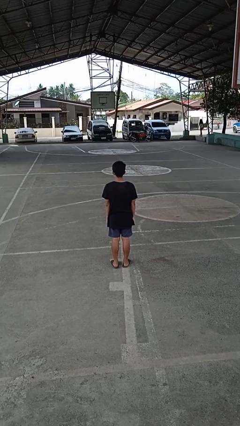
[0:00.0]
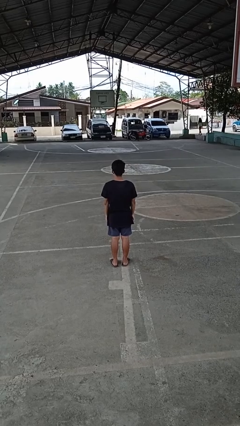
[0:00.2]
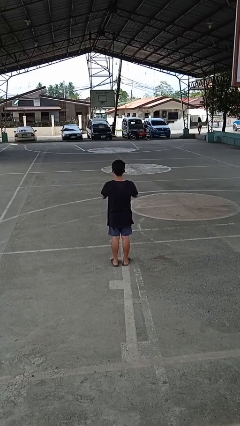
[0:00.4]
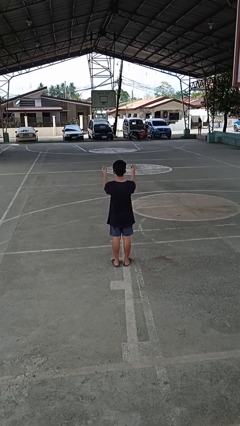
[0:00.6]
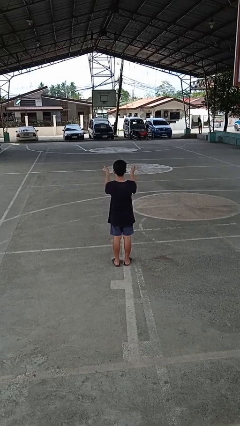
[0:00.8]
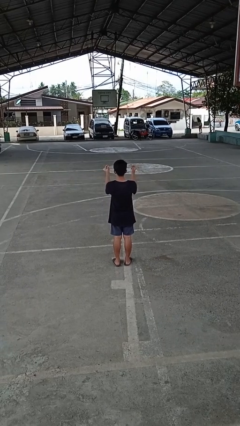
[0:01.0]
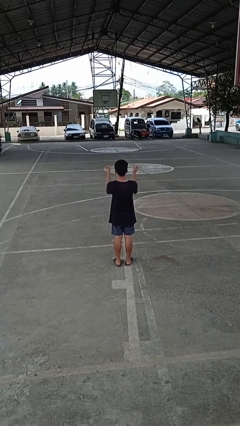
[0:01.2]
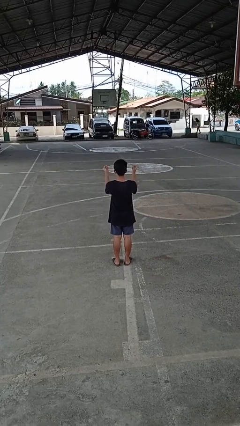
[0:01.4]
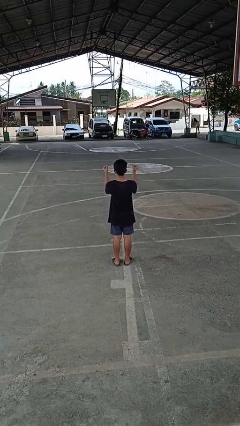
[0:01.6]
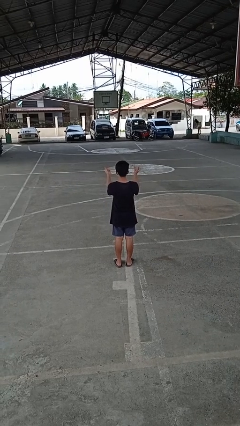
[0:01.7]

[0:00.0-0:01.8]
person snaps fingers

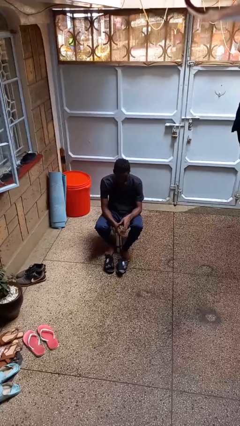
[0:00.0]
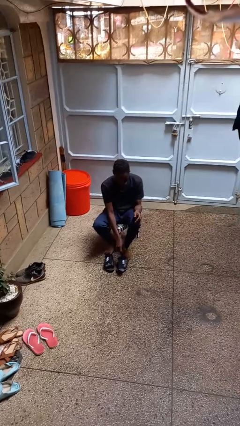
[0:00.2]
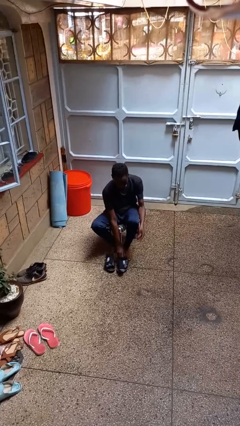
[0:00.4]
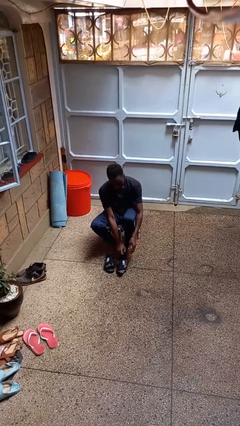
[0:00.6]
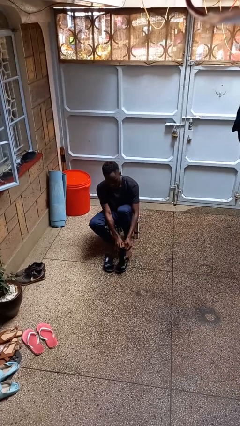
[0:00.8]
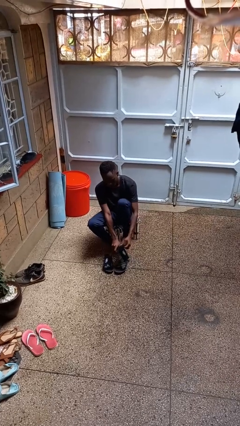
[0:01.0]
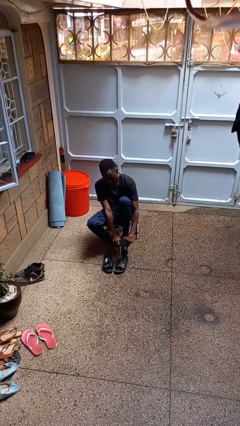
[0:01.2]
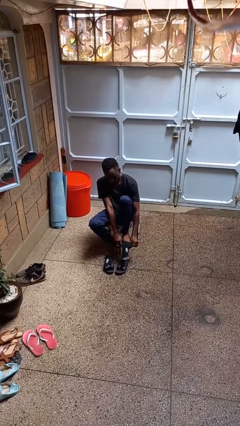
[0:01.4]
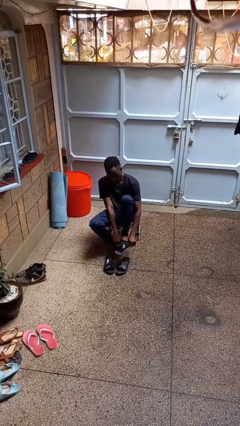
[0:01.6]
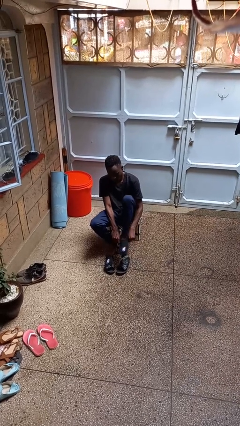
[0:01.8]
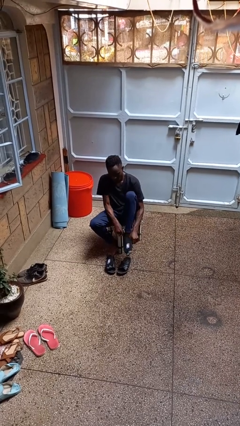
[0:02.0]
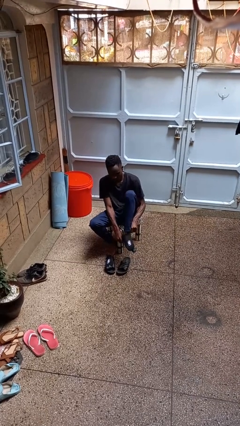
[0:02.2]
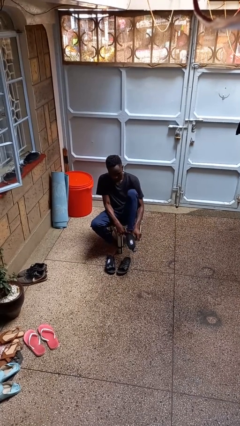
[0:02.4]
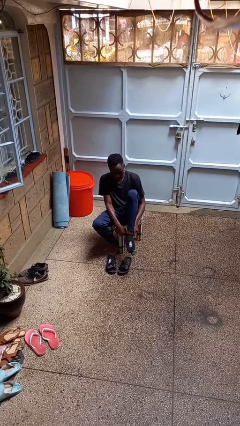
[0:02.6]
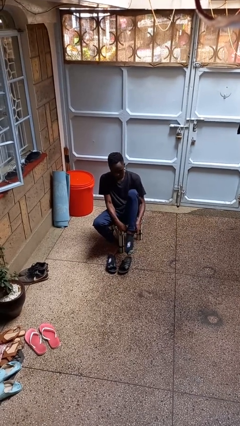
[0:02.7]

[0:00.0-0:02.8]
person puts on socks

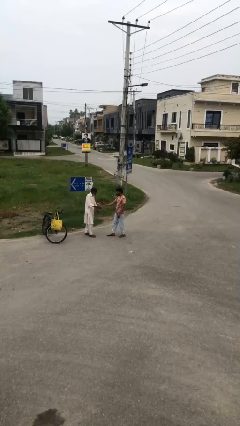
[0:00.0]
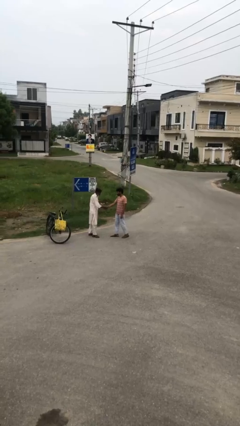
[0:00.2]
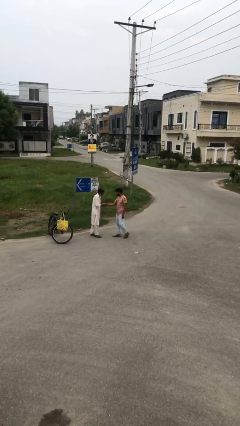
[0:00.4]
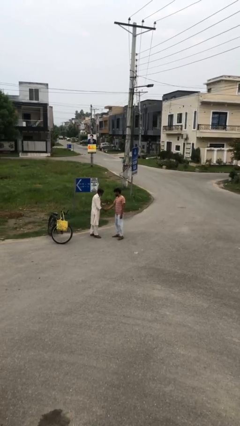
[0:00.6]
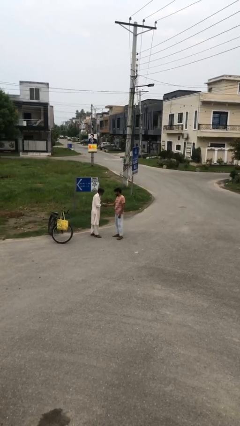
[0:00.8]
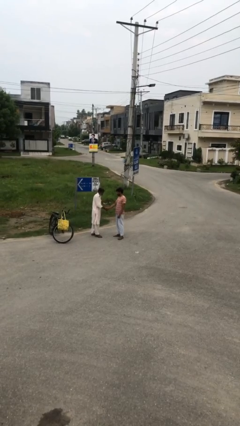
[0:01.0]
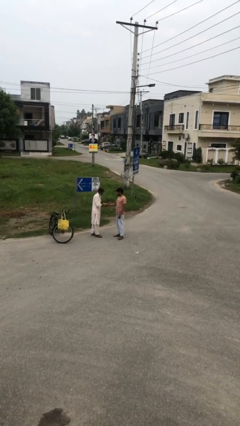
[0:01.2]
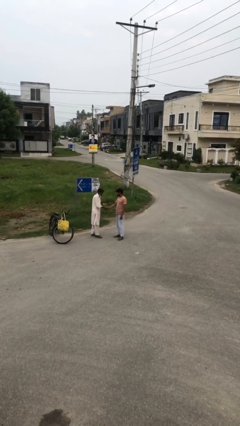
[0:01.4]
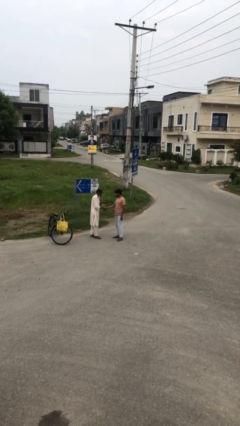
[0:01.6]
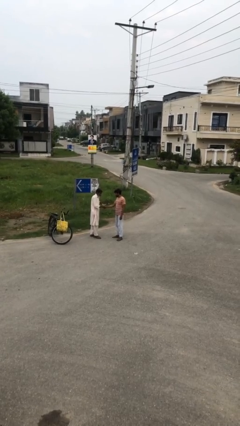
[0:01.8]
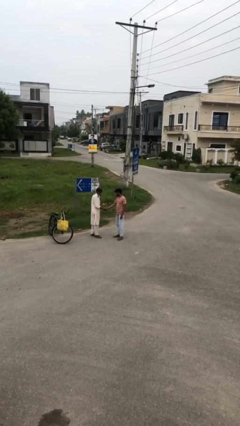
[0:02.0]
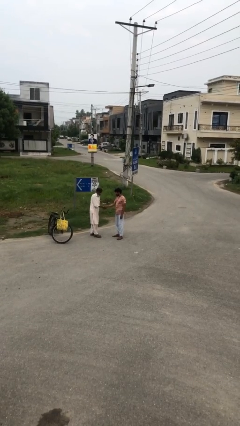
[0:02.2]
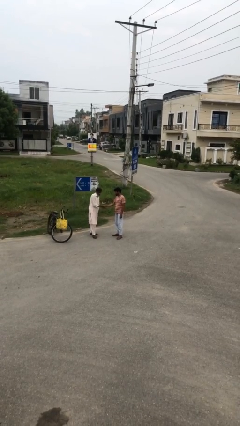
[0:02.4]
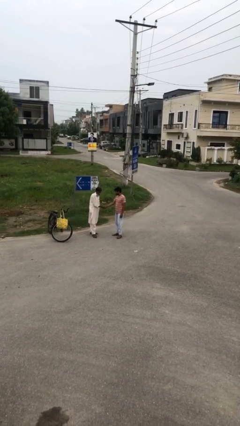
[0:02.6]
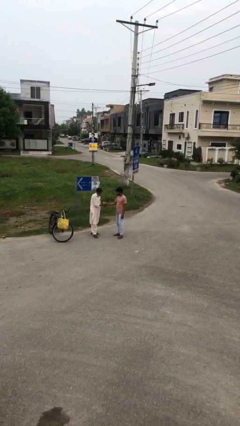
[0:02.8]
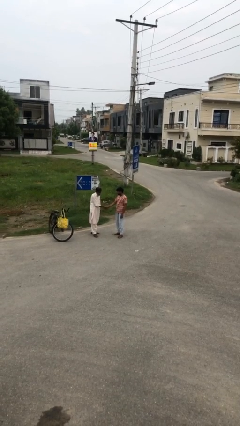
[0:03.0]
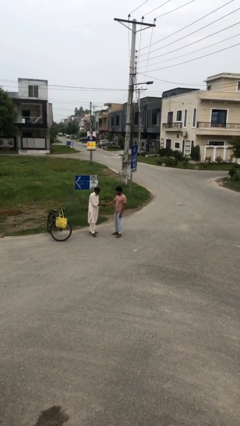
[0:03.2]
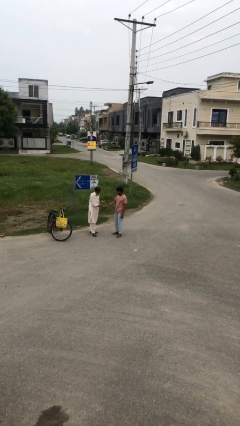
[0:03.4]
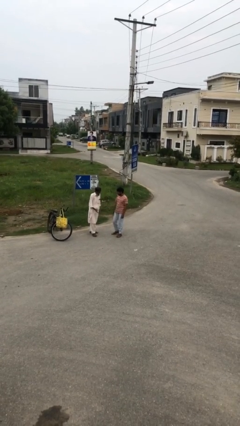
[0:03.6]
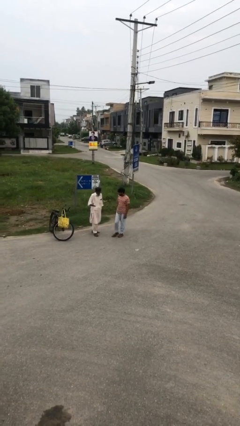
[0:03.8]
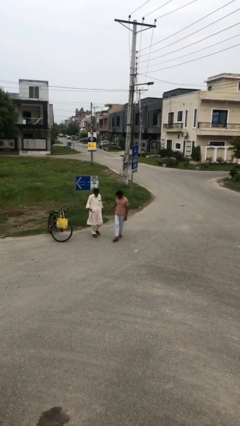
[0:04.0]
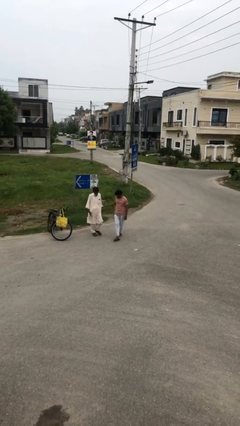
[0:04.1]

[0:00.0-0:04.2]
person shakes hand

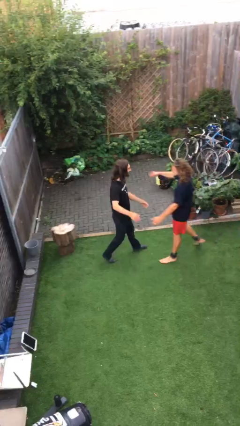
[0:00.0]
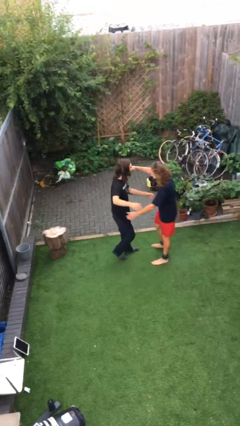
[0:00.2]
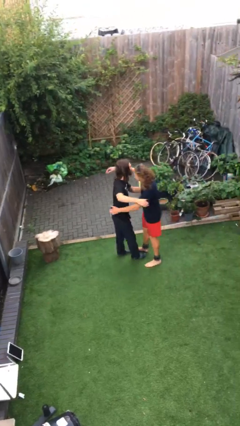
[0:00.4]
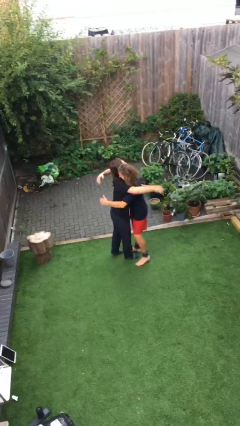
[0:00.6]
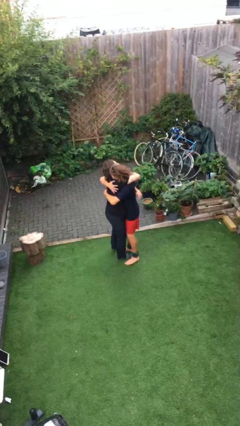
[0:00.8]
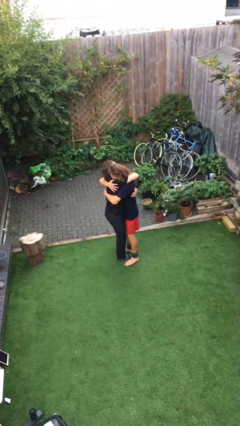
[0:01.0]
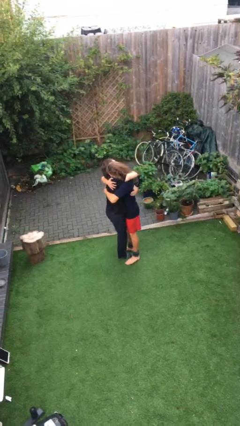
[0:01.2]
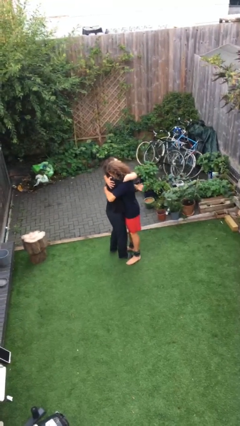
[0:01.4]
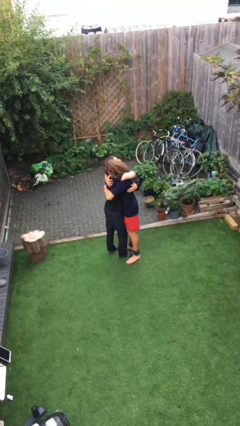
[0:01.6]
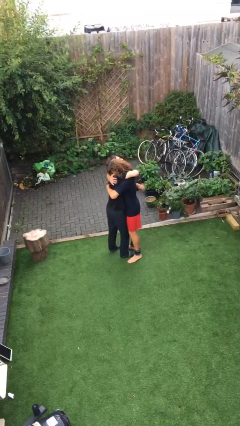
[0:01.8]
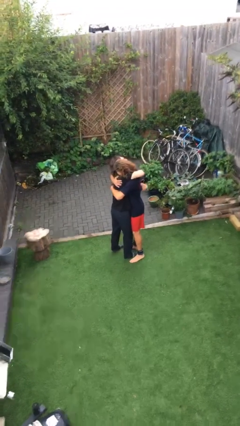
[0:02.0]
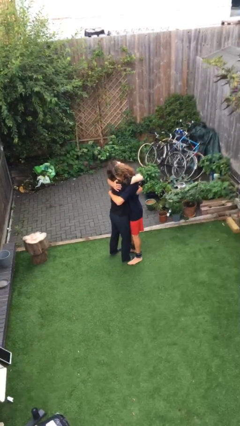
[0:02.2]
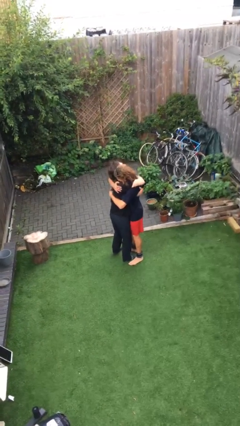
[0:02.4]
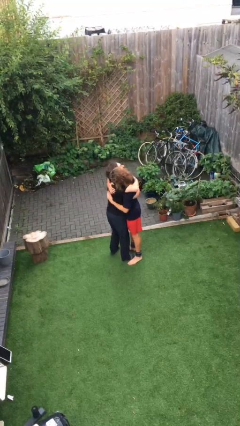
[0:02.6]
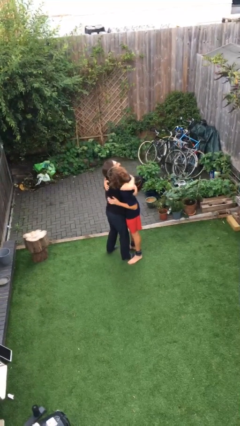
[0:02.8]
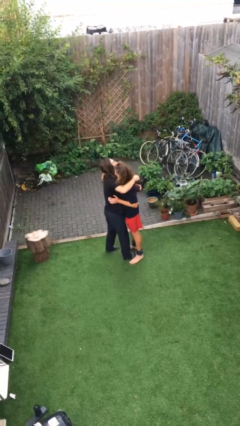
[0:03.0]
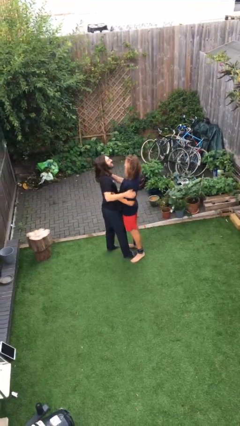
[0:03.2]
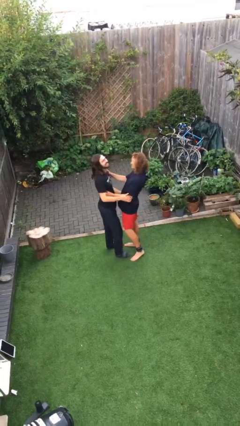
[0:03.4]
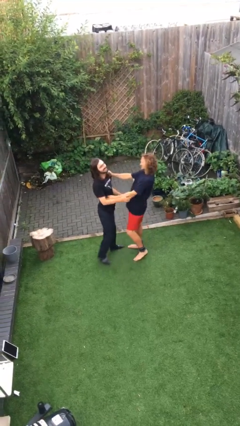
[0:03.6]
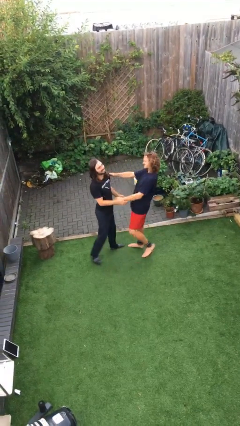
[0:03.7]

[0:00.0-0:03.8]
person embraces person

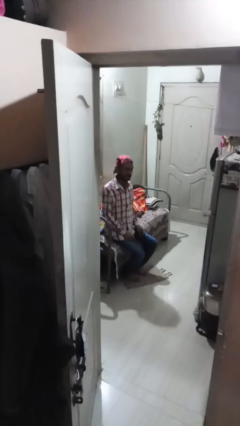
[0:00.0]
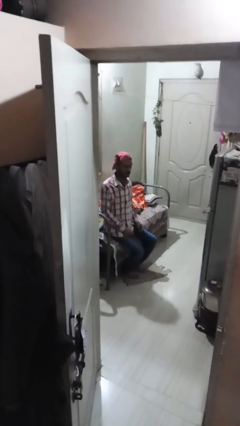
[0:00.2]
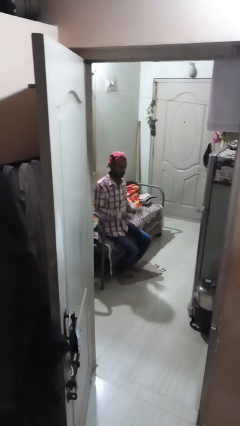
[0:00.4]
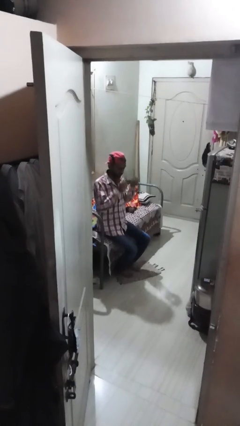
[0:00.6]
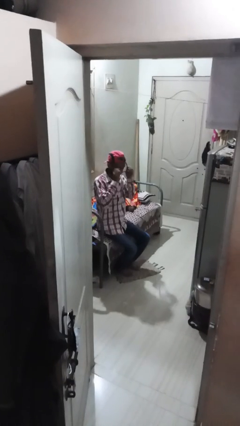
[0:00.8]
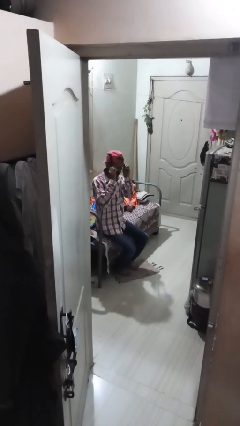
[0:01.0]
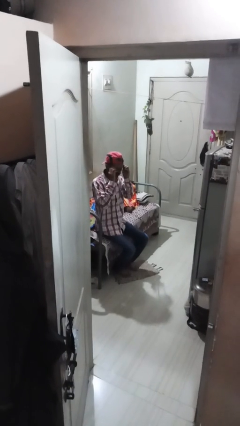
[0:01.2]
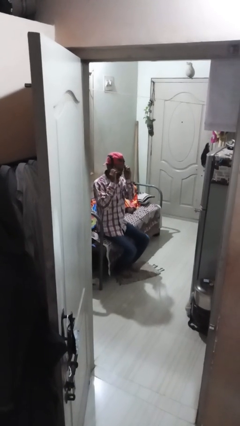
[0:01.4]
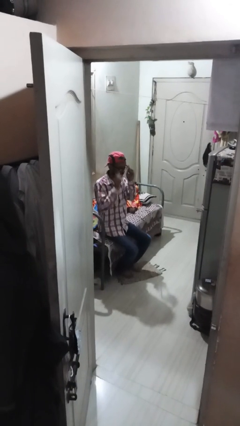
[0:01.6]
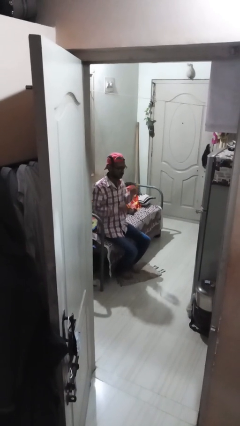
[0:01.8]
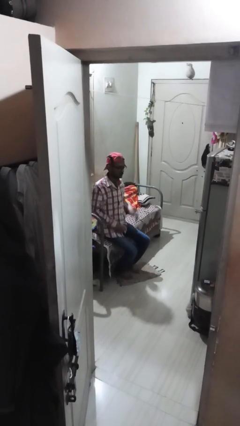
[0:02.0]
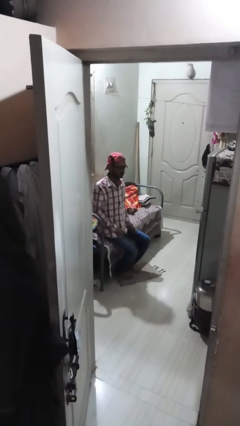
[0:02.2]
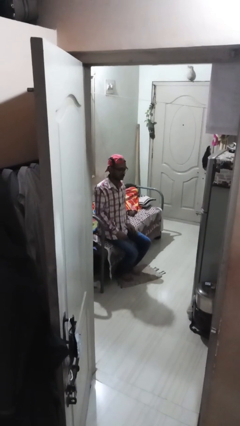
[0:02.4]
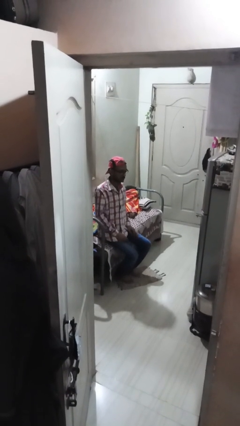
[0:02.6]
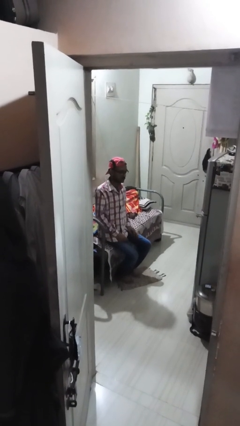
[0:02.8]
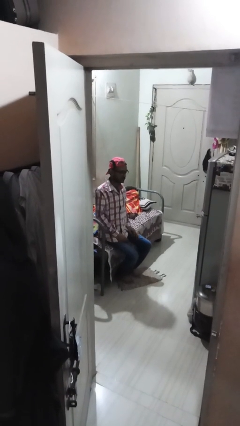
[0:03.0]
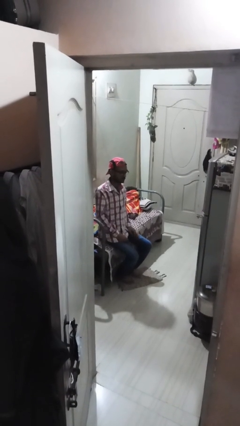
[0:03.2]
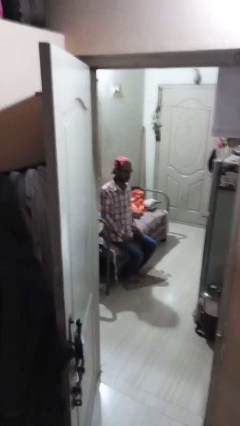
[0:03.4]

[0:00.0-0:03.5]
person puts on glasses

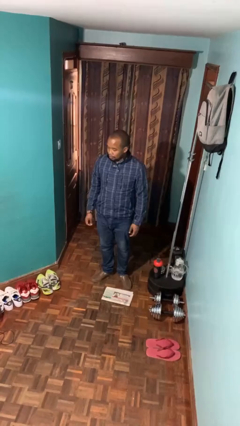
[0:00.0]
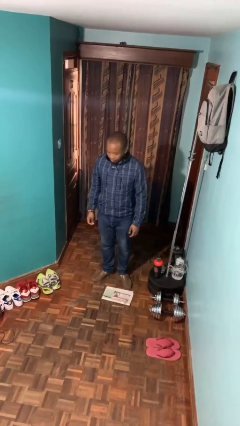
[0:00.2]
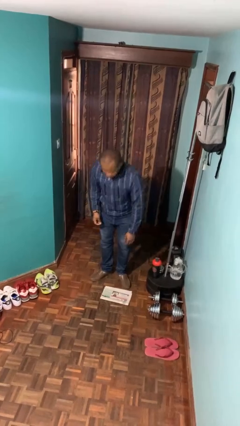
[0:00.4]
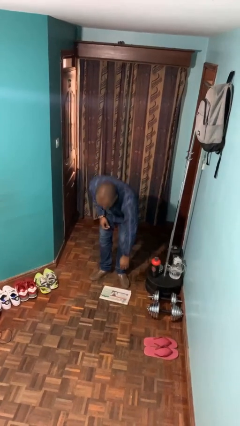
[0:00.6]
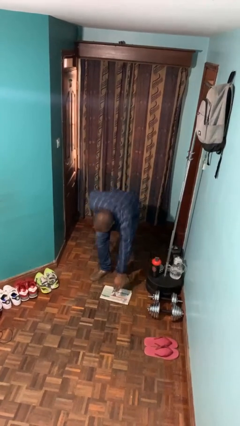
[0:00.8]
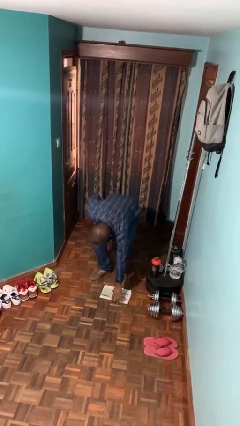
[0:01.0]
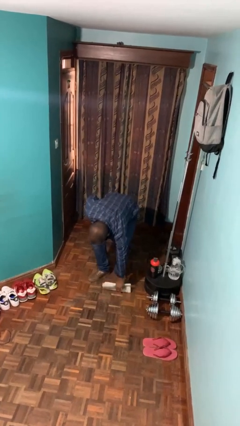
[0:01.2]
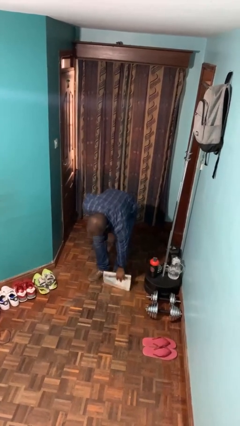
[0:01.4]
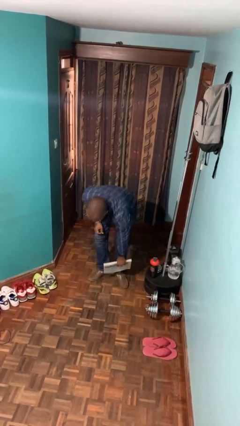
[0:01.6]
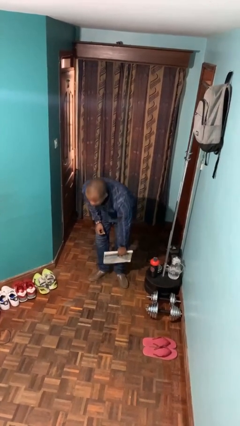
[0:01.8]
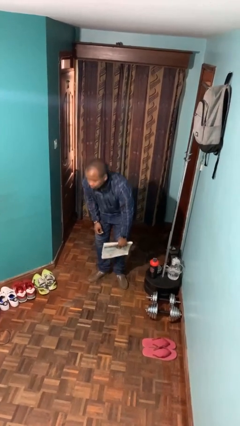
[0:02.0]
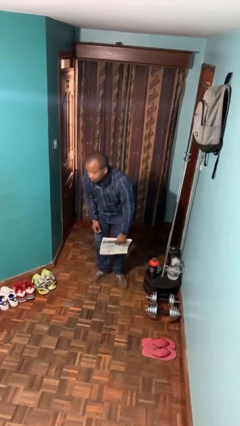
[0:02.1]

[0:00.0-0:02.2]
person picks up object from floor
